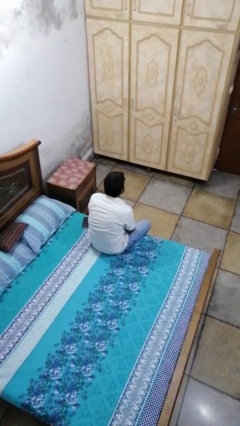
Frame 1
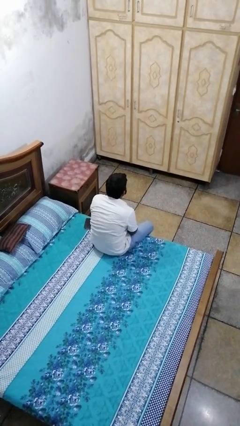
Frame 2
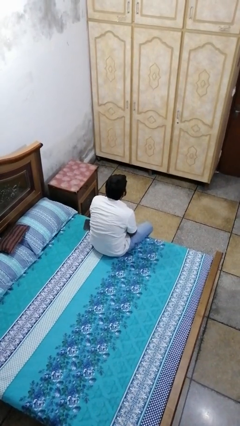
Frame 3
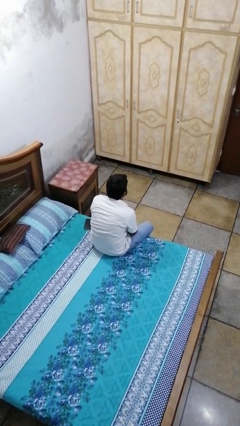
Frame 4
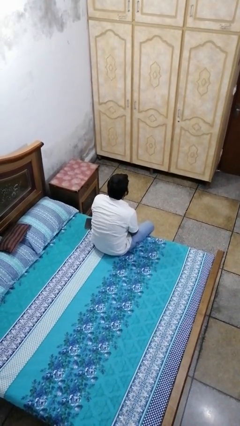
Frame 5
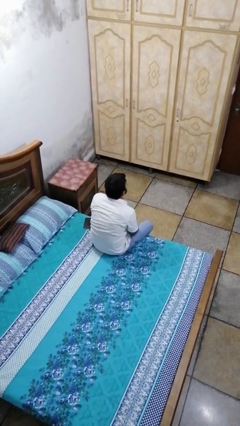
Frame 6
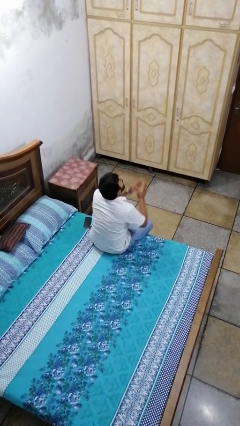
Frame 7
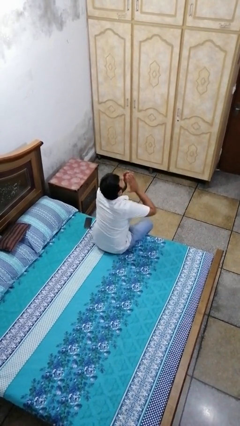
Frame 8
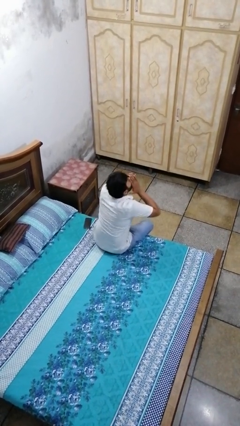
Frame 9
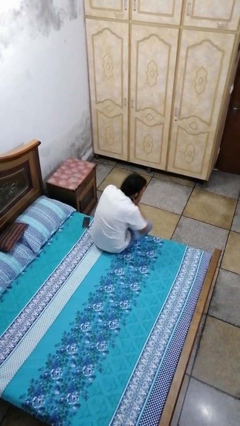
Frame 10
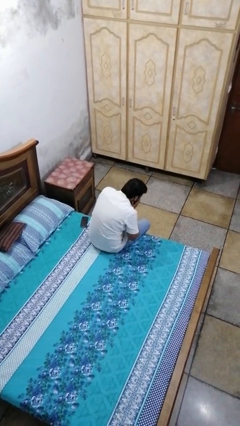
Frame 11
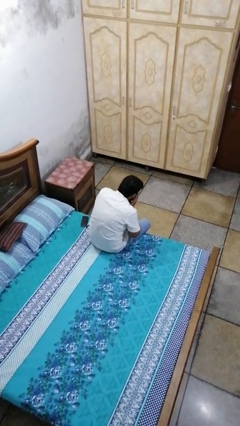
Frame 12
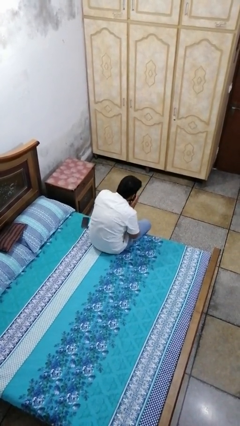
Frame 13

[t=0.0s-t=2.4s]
person sneezes into hand

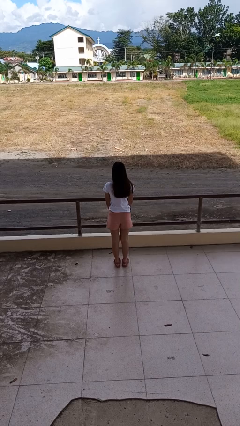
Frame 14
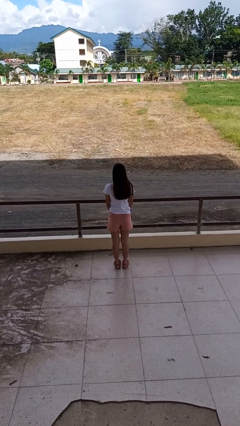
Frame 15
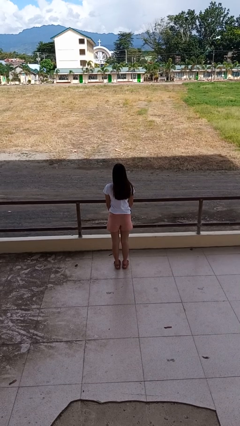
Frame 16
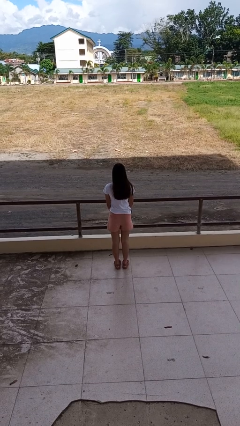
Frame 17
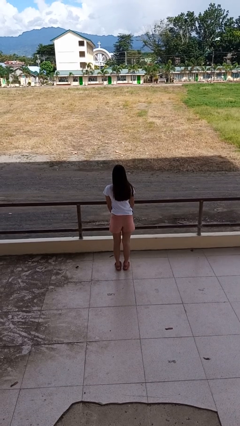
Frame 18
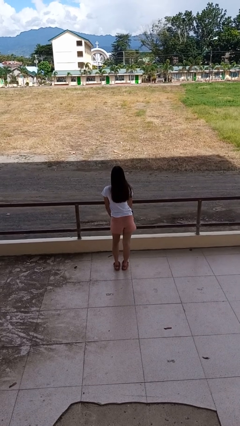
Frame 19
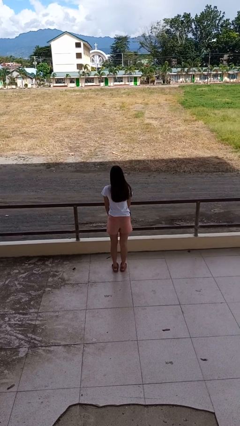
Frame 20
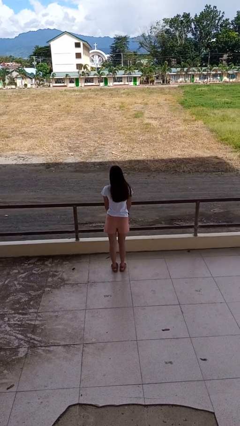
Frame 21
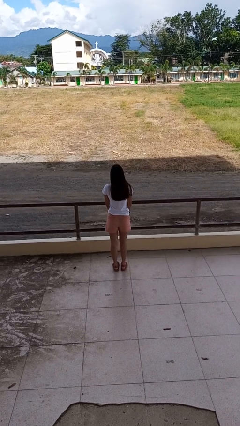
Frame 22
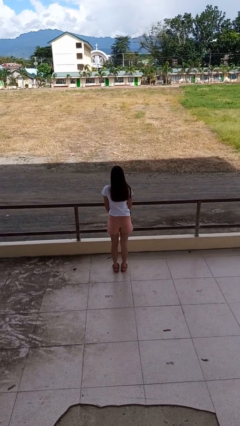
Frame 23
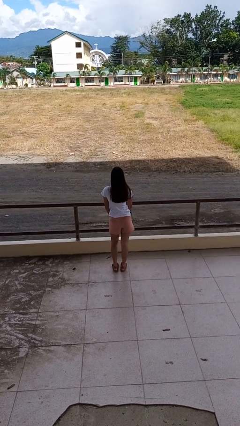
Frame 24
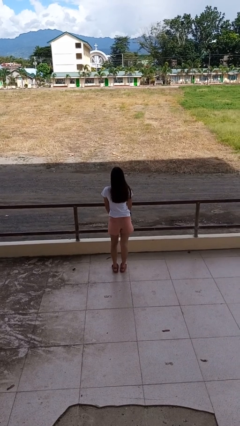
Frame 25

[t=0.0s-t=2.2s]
person wiggles hips

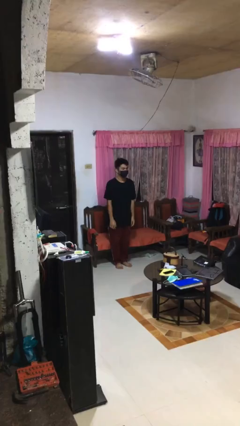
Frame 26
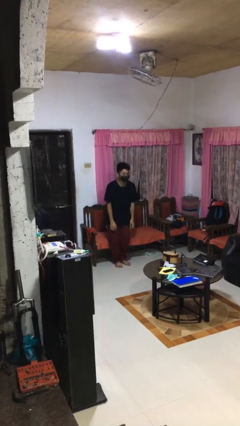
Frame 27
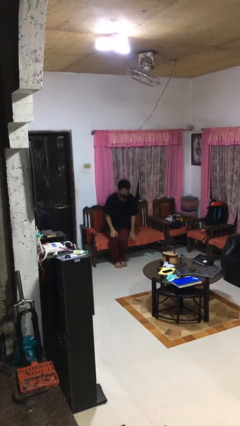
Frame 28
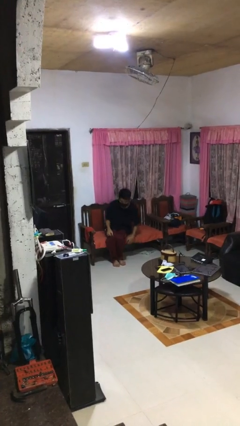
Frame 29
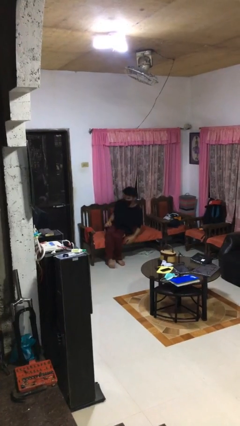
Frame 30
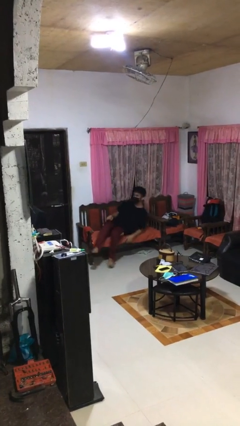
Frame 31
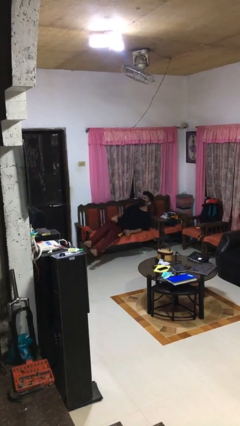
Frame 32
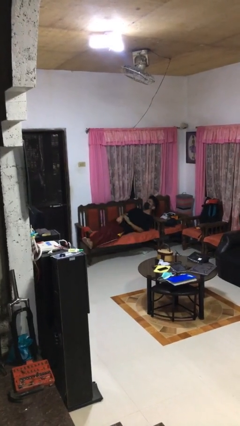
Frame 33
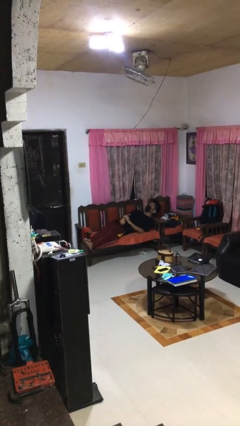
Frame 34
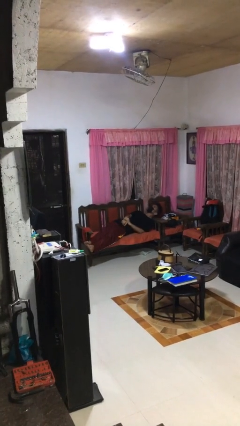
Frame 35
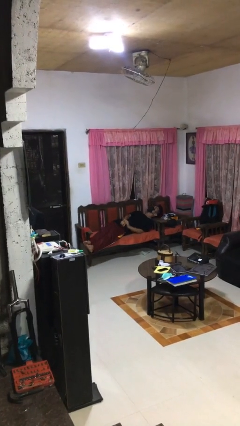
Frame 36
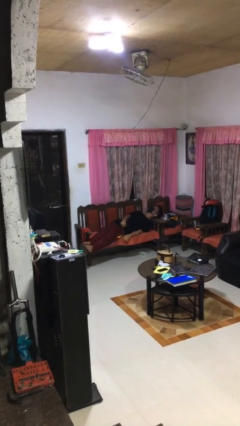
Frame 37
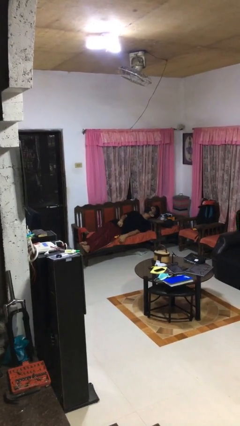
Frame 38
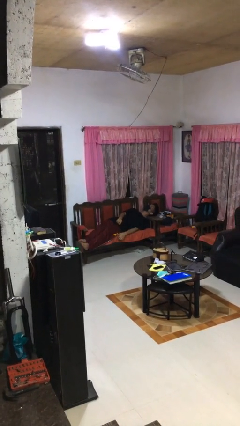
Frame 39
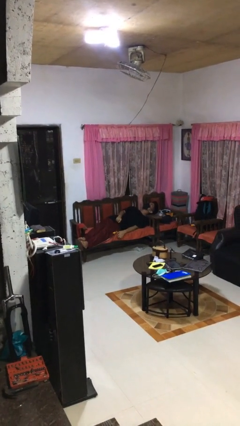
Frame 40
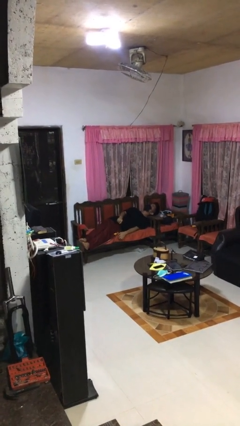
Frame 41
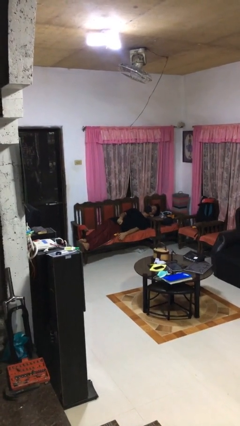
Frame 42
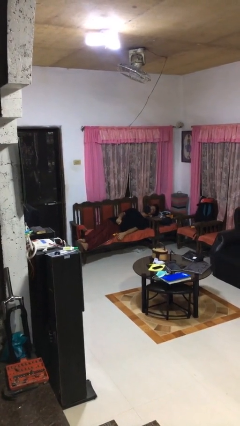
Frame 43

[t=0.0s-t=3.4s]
person lies down on couch

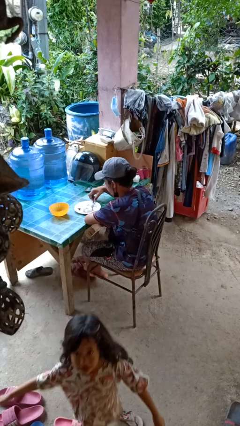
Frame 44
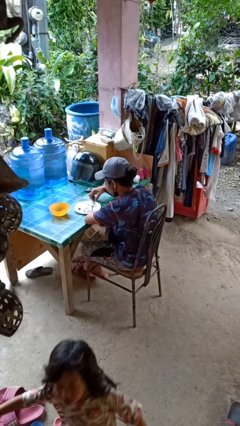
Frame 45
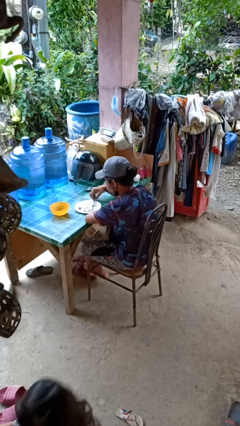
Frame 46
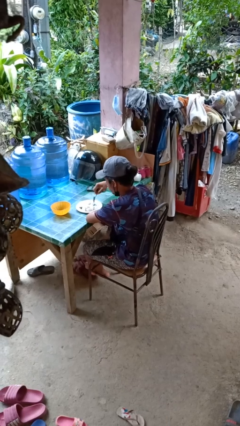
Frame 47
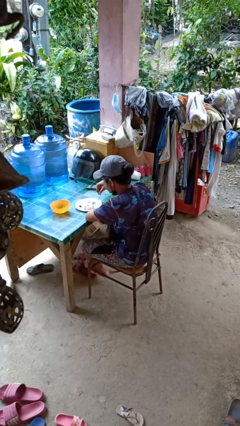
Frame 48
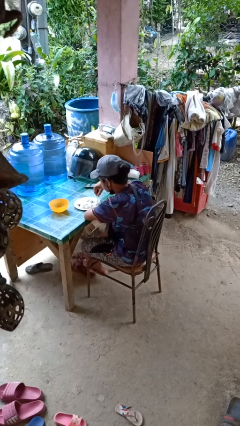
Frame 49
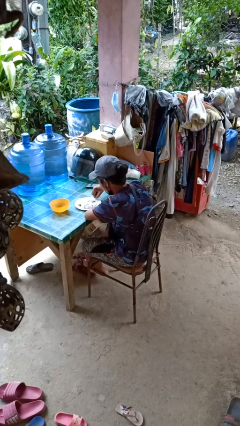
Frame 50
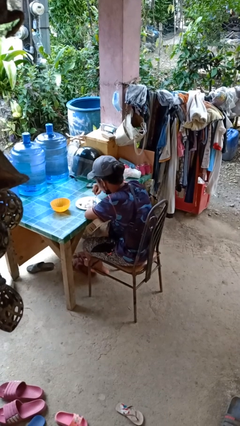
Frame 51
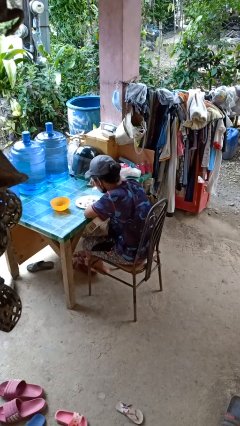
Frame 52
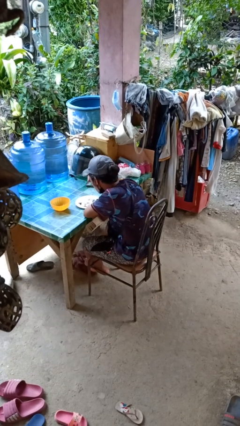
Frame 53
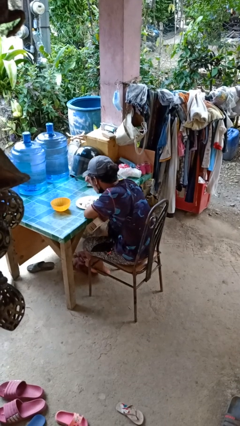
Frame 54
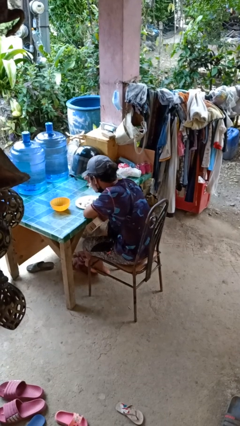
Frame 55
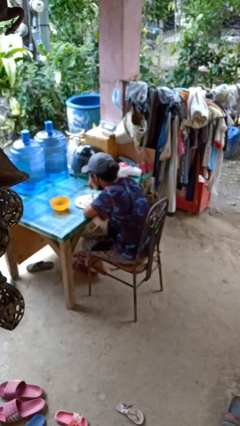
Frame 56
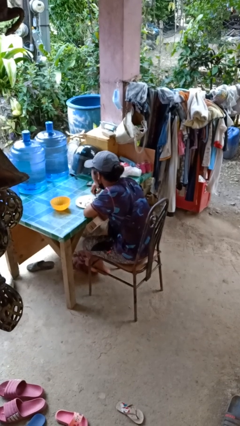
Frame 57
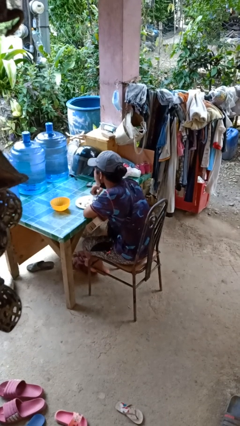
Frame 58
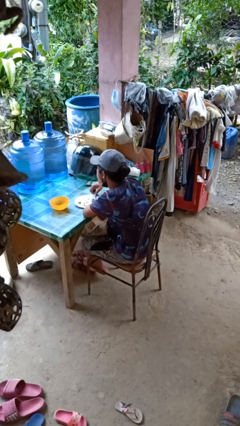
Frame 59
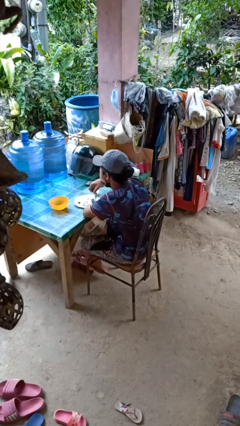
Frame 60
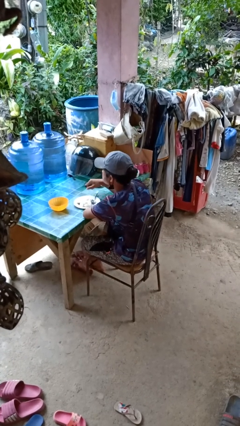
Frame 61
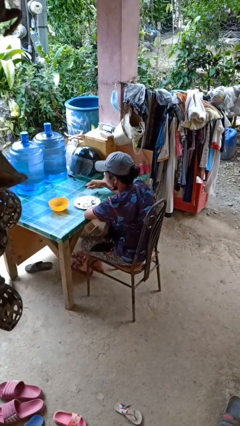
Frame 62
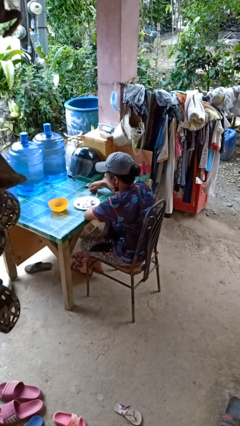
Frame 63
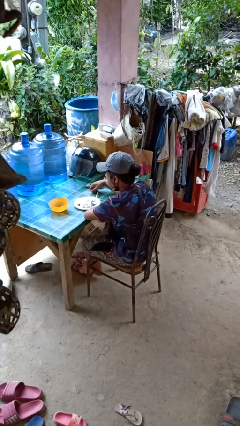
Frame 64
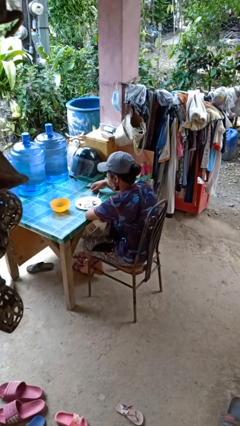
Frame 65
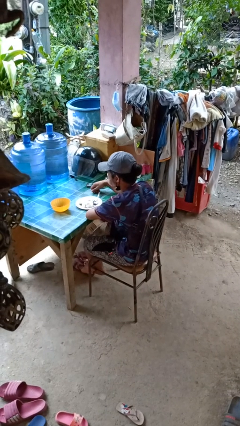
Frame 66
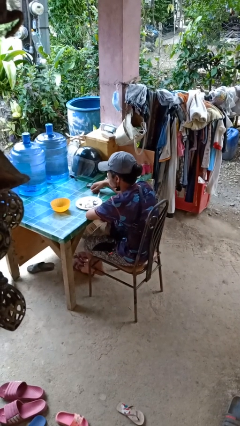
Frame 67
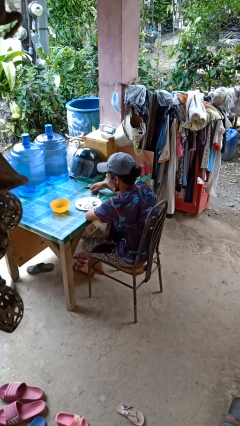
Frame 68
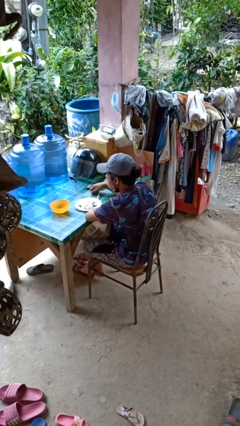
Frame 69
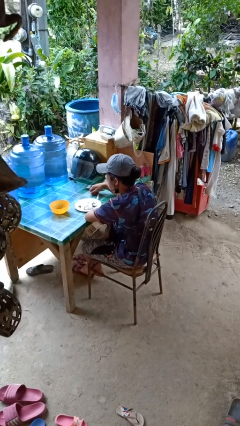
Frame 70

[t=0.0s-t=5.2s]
person eats with utensil

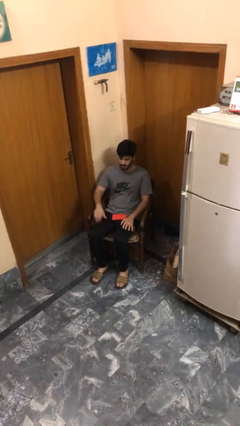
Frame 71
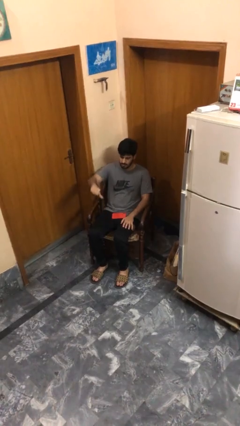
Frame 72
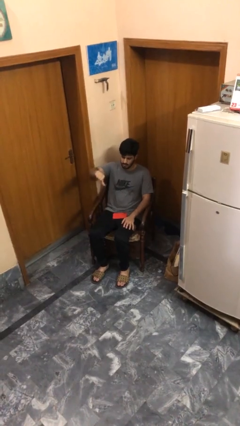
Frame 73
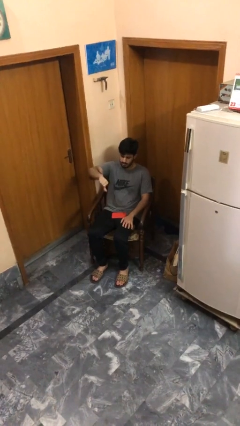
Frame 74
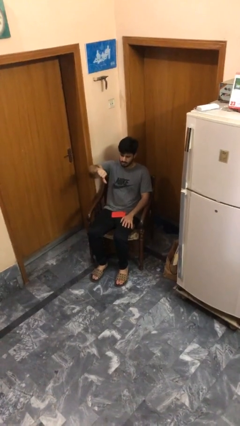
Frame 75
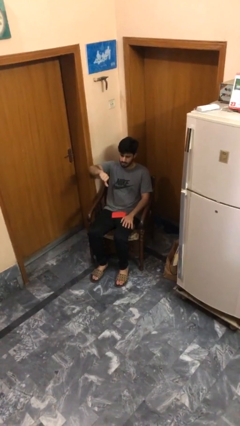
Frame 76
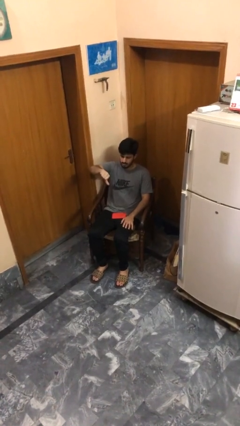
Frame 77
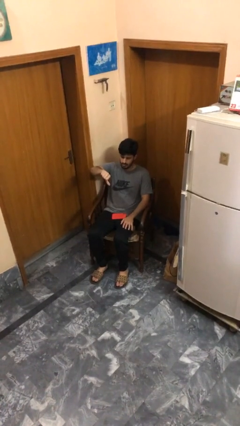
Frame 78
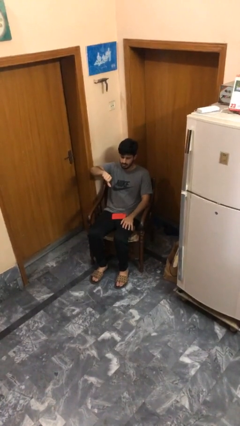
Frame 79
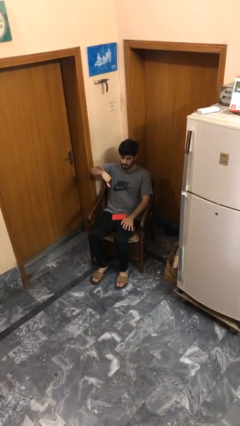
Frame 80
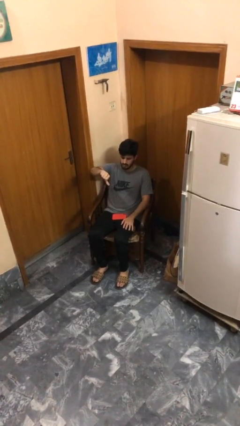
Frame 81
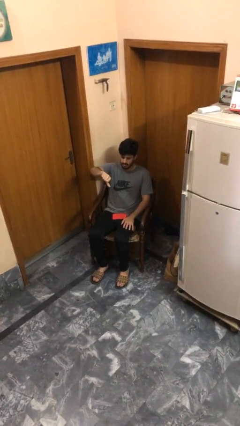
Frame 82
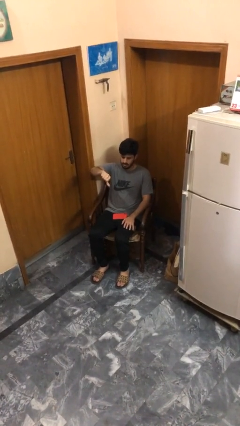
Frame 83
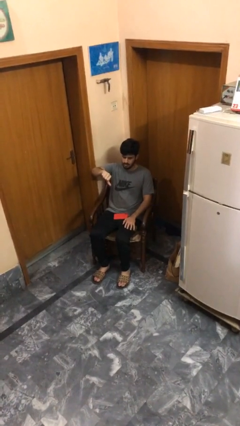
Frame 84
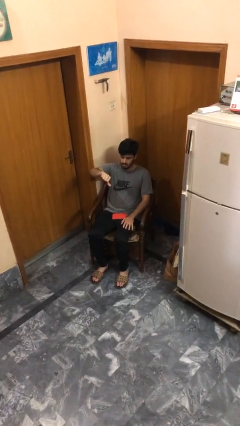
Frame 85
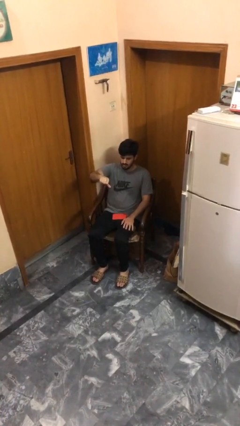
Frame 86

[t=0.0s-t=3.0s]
person gestures thumbs down

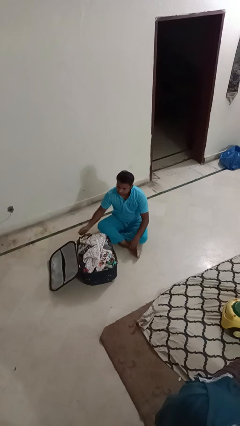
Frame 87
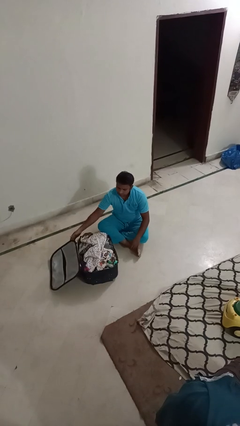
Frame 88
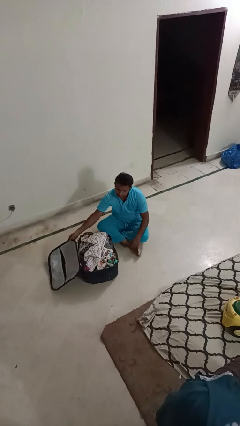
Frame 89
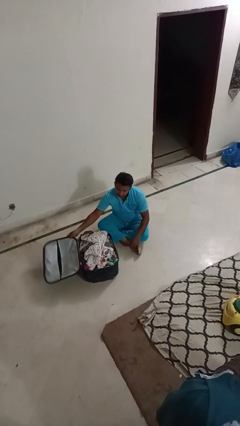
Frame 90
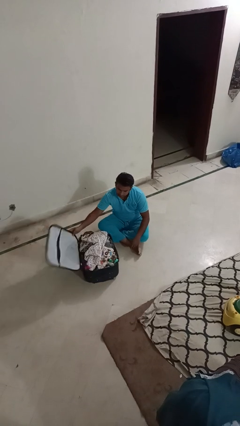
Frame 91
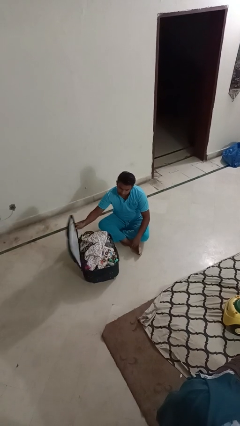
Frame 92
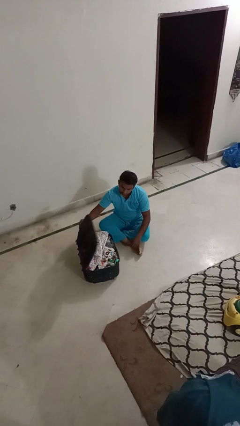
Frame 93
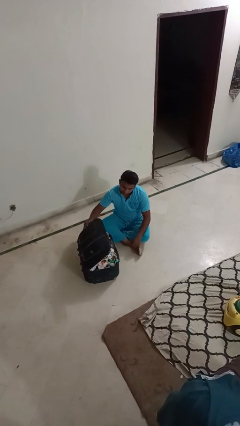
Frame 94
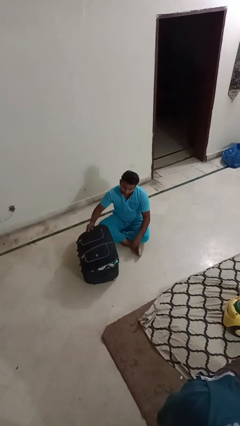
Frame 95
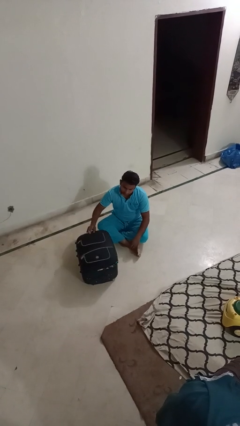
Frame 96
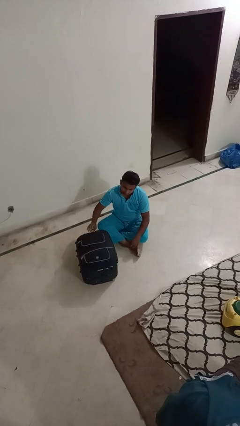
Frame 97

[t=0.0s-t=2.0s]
person closes suitcase
